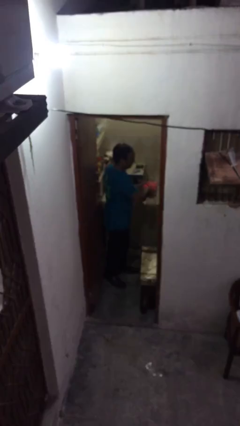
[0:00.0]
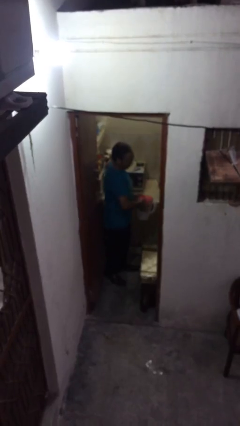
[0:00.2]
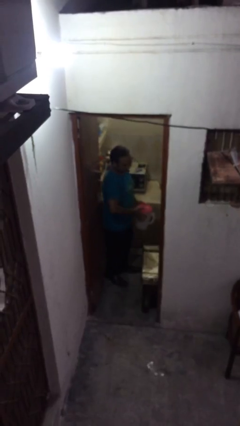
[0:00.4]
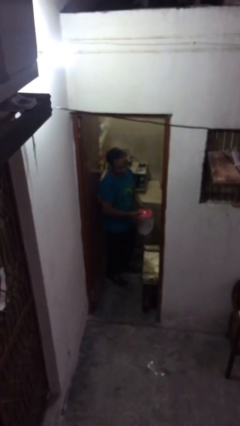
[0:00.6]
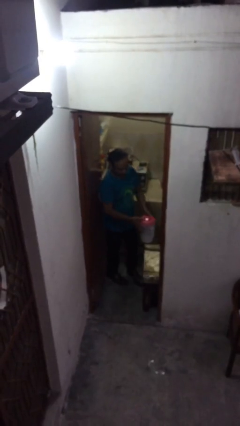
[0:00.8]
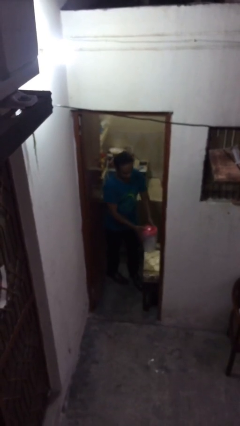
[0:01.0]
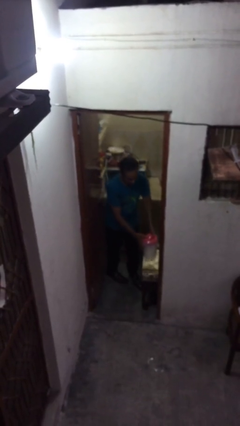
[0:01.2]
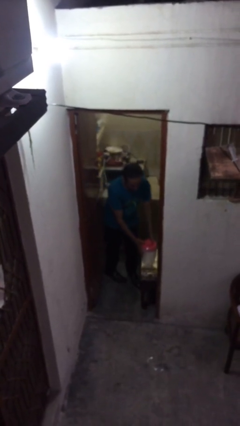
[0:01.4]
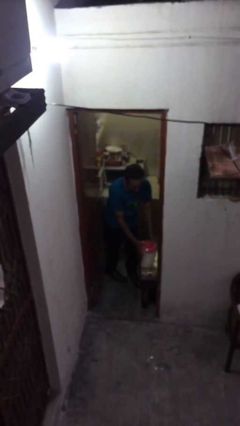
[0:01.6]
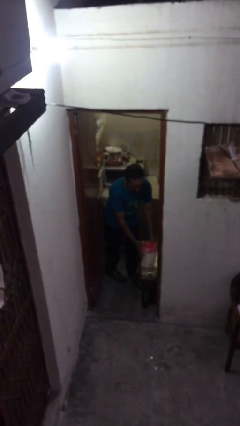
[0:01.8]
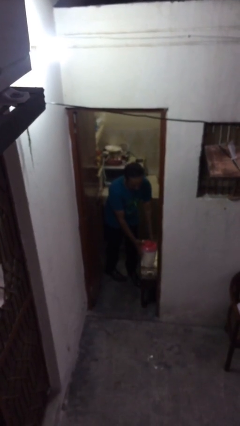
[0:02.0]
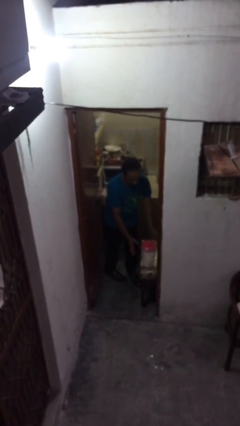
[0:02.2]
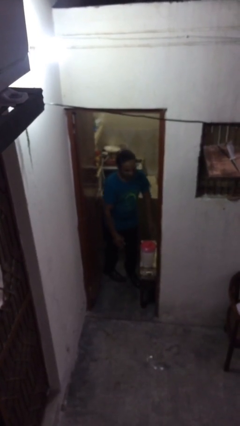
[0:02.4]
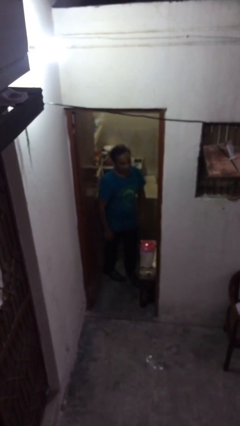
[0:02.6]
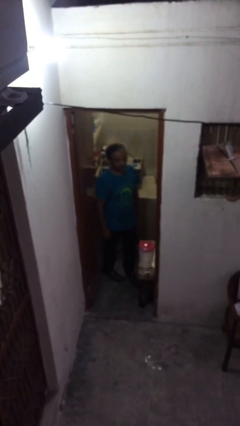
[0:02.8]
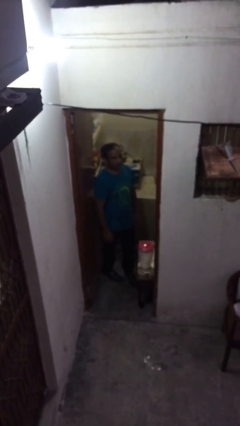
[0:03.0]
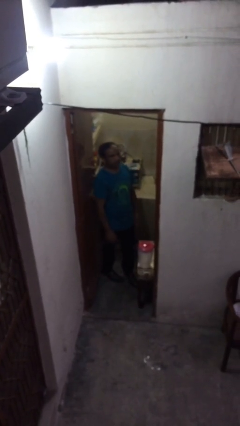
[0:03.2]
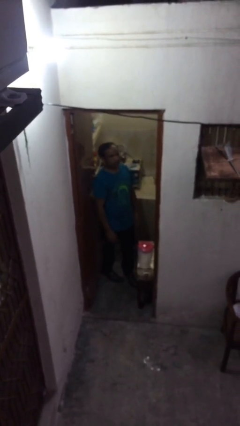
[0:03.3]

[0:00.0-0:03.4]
person puts down object on table

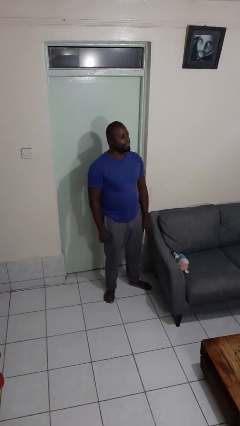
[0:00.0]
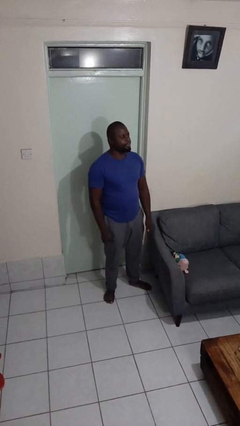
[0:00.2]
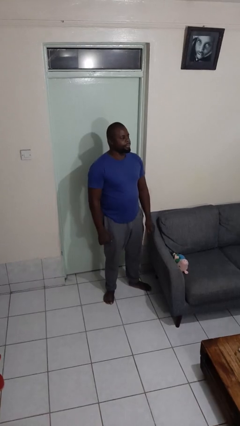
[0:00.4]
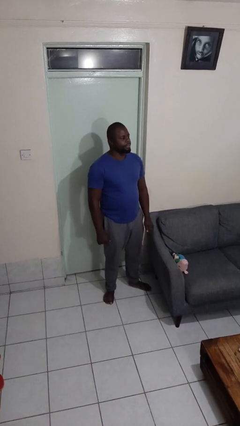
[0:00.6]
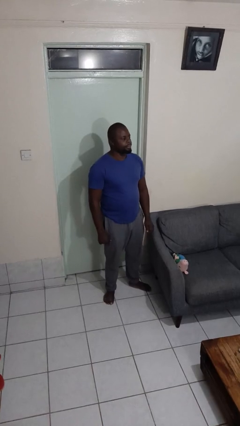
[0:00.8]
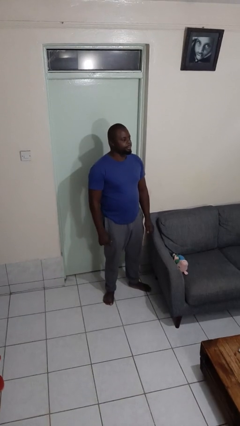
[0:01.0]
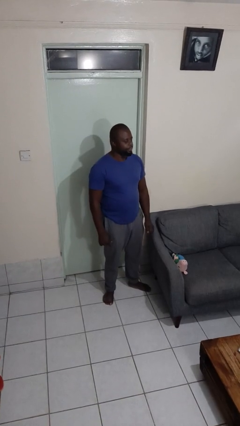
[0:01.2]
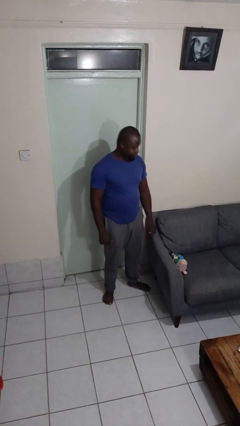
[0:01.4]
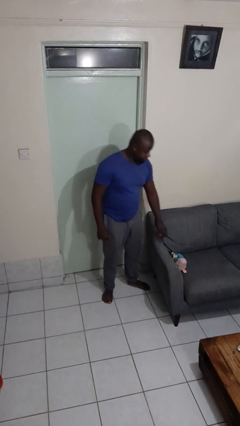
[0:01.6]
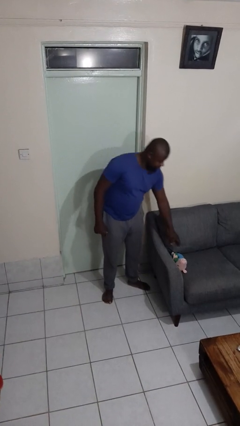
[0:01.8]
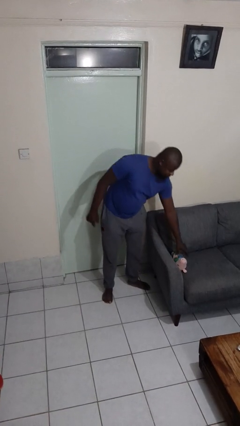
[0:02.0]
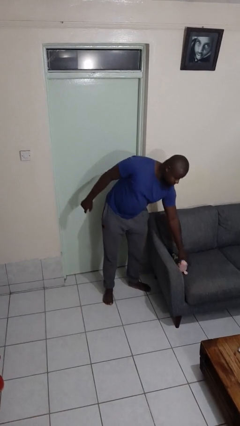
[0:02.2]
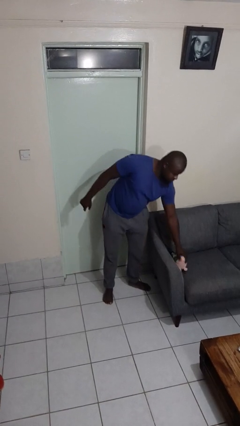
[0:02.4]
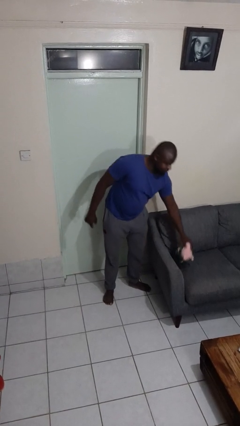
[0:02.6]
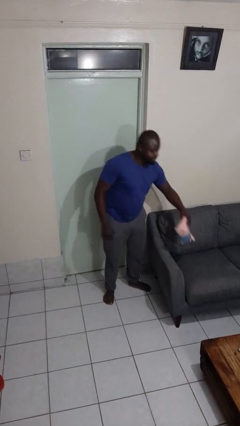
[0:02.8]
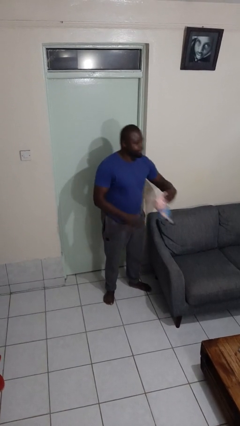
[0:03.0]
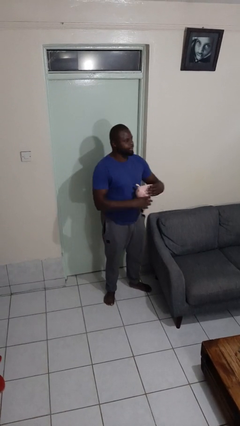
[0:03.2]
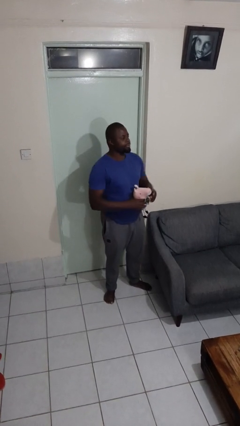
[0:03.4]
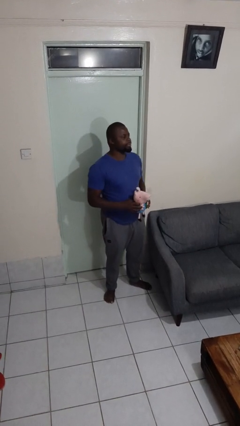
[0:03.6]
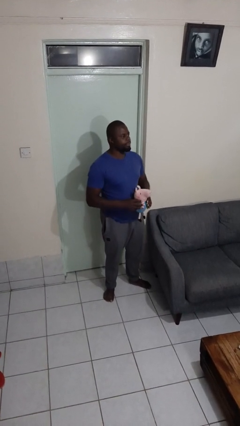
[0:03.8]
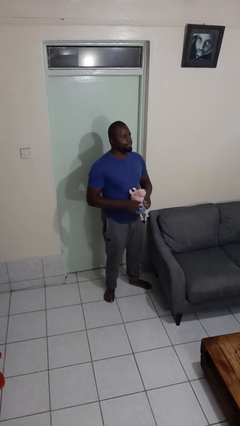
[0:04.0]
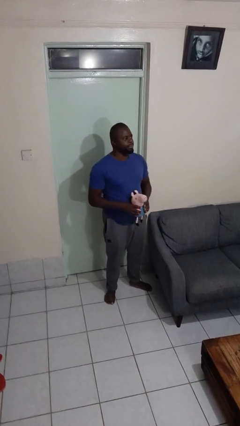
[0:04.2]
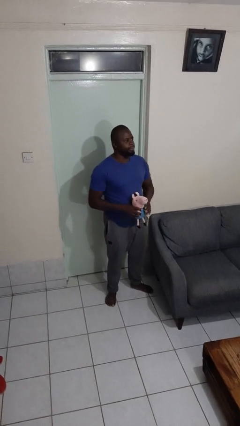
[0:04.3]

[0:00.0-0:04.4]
person picks up object from couch

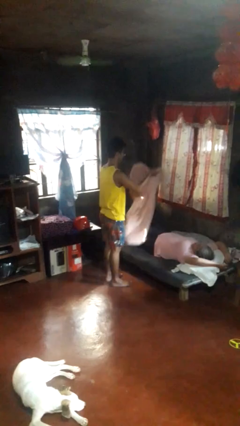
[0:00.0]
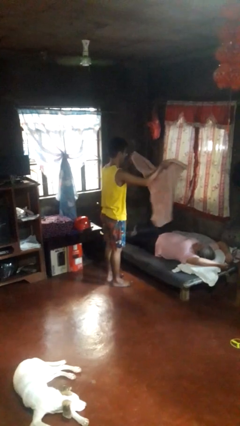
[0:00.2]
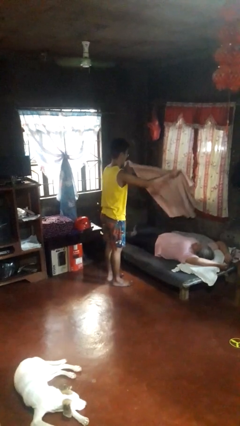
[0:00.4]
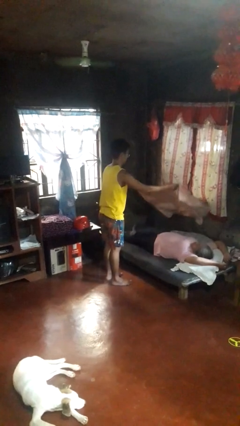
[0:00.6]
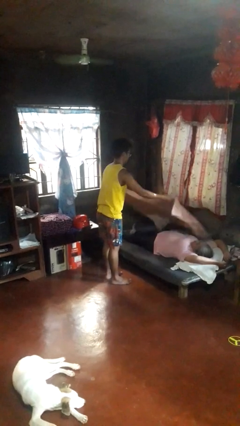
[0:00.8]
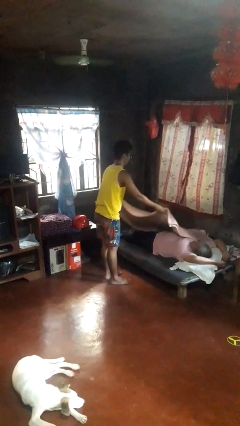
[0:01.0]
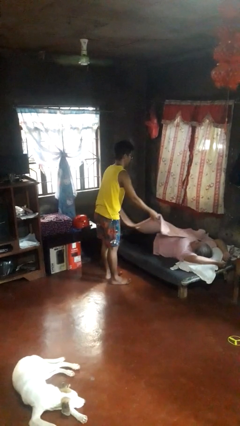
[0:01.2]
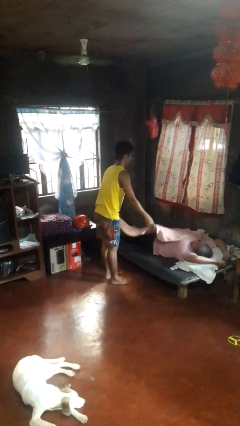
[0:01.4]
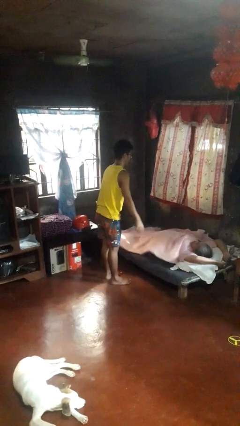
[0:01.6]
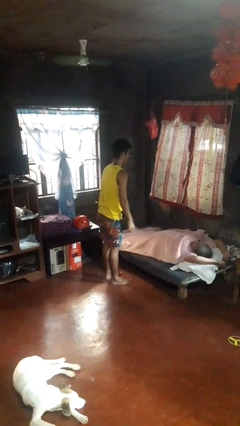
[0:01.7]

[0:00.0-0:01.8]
person covers friend with blanket

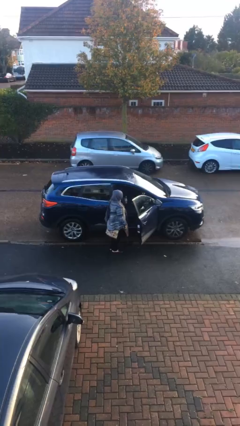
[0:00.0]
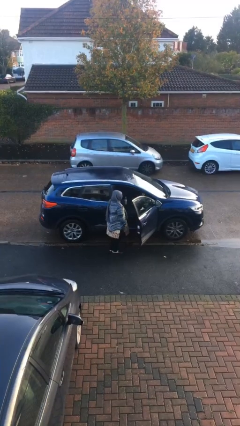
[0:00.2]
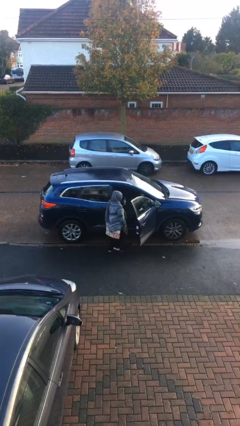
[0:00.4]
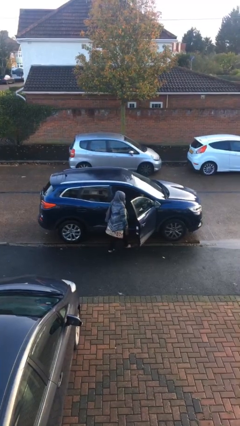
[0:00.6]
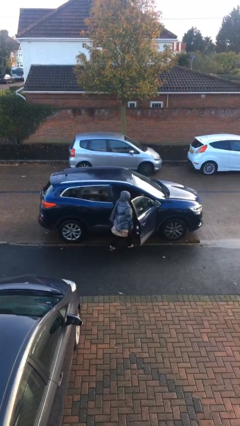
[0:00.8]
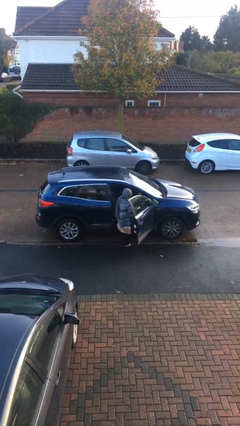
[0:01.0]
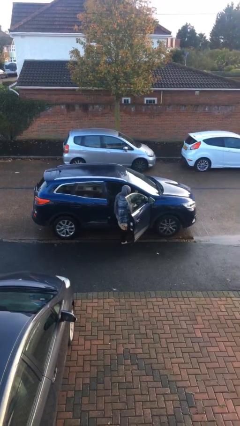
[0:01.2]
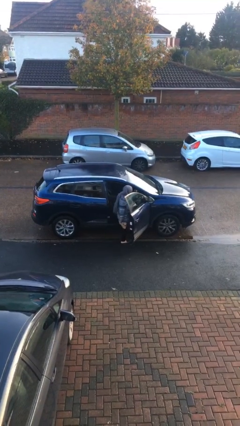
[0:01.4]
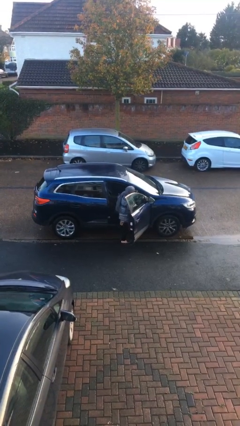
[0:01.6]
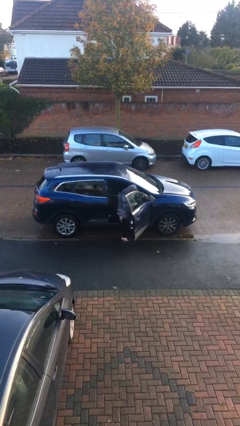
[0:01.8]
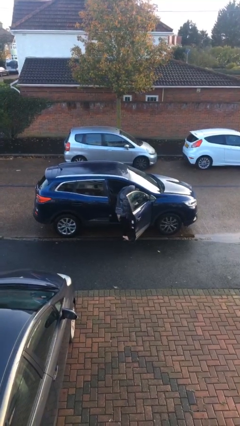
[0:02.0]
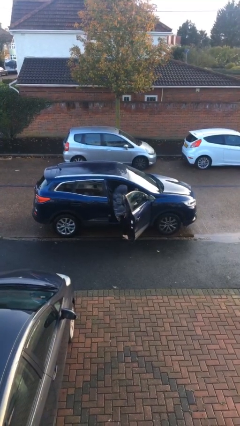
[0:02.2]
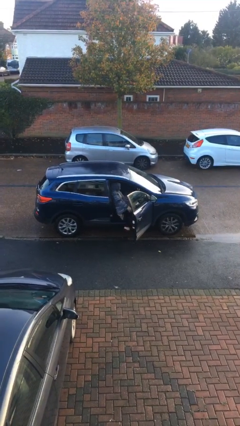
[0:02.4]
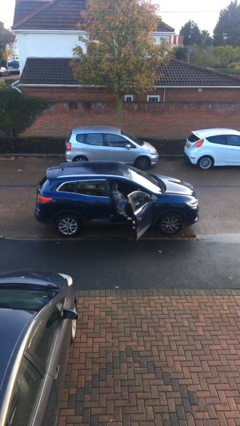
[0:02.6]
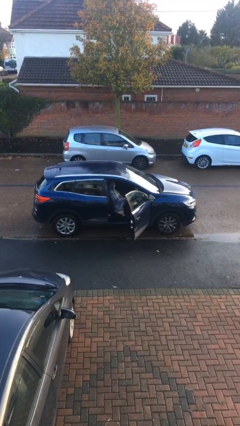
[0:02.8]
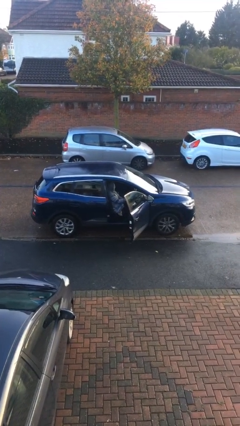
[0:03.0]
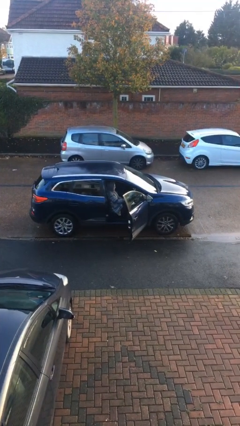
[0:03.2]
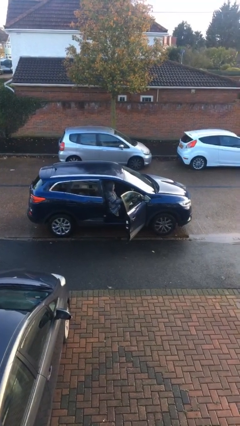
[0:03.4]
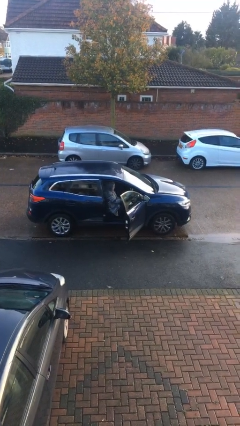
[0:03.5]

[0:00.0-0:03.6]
person enters car

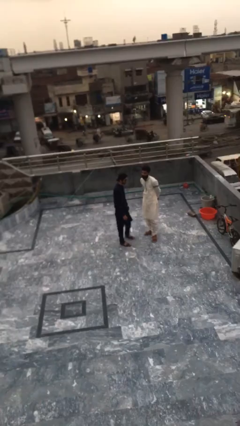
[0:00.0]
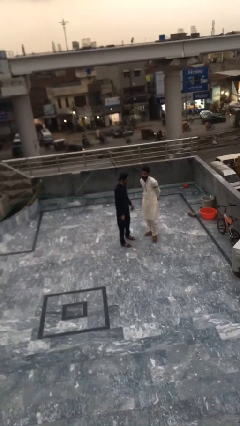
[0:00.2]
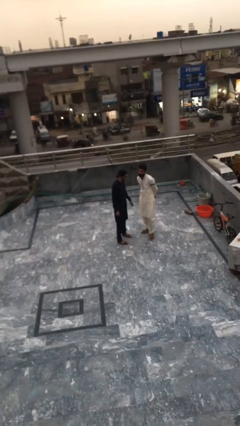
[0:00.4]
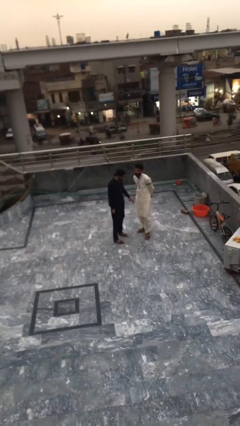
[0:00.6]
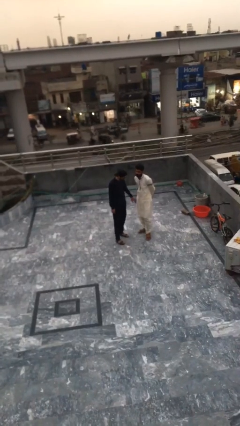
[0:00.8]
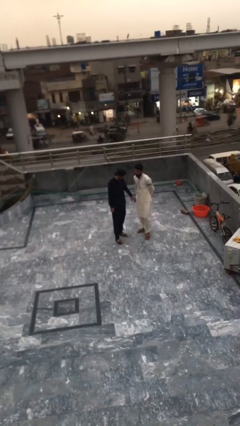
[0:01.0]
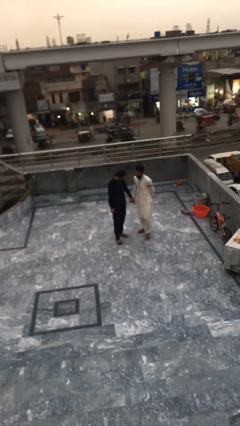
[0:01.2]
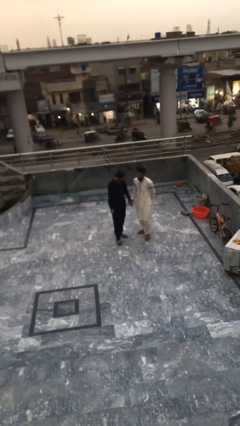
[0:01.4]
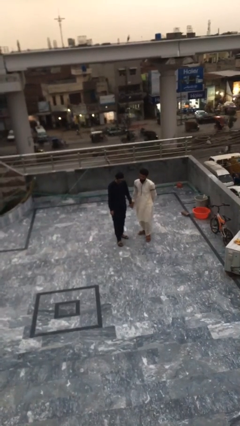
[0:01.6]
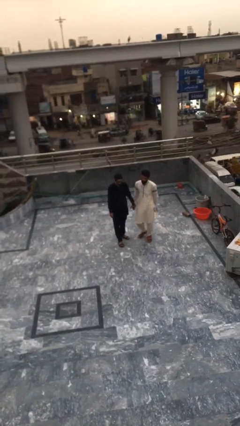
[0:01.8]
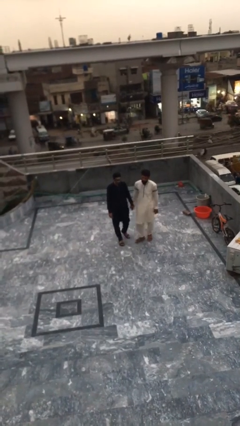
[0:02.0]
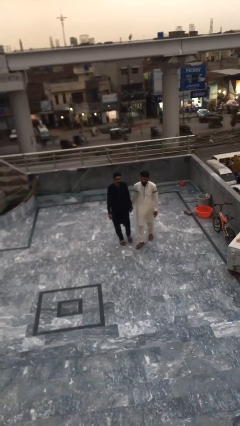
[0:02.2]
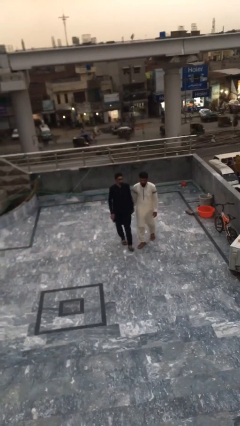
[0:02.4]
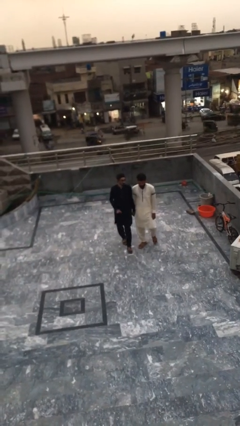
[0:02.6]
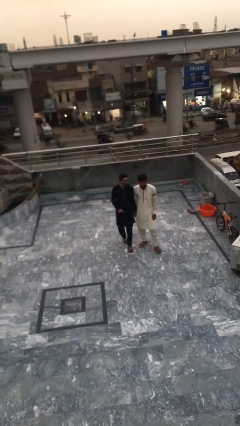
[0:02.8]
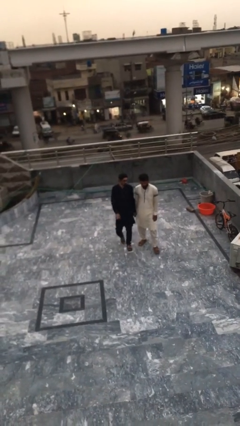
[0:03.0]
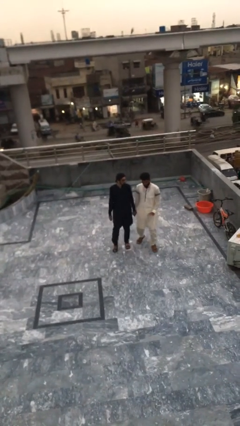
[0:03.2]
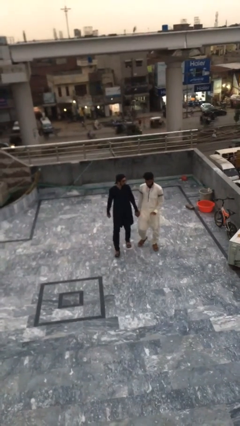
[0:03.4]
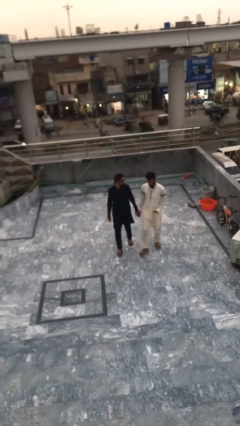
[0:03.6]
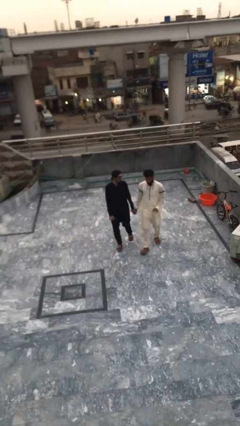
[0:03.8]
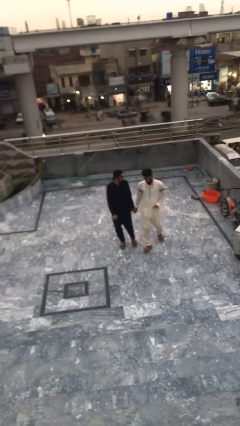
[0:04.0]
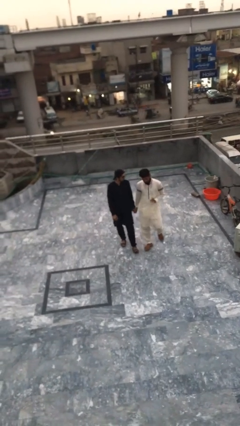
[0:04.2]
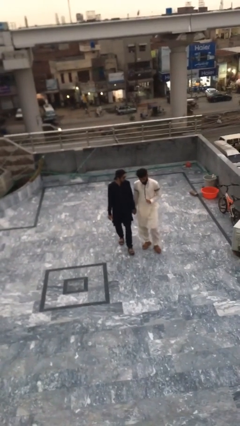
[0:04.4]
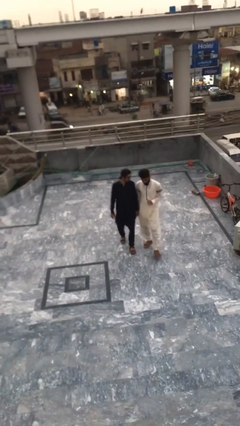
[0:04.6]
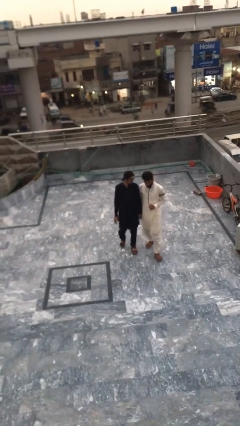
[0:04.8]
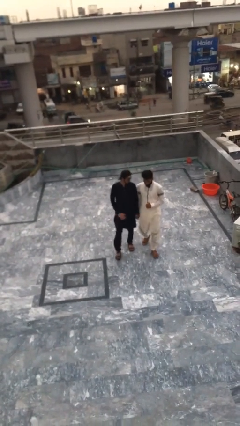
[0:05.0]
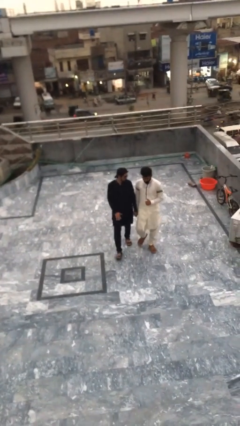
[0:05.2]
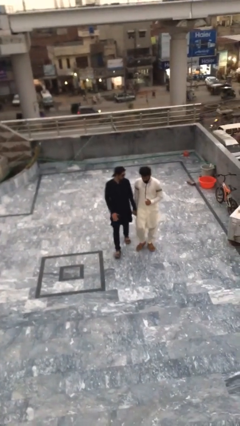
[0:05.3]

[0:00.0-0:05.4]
person holds hand
